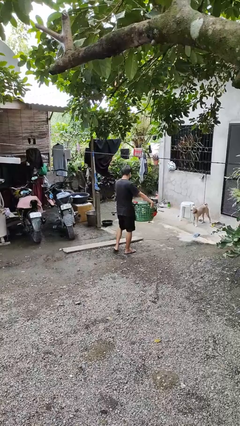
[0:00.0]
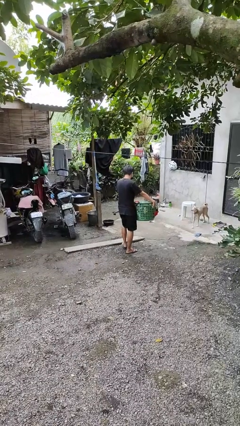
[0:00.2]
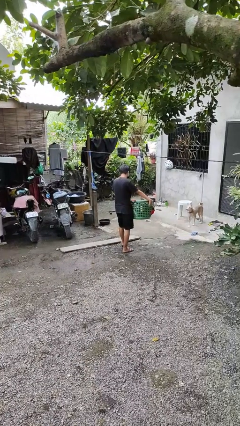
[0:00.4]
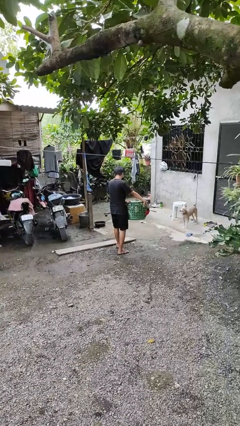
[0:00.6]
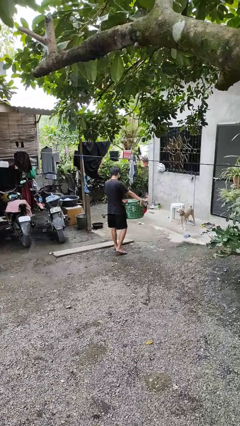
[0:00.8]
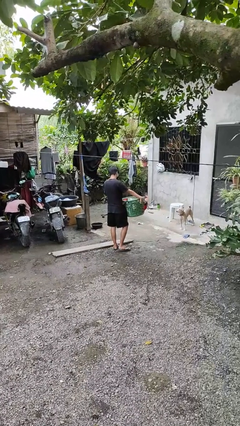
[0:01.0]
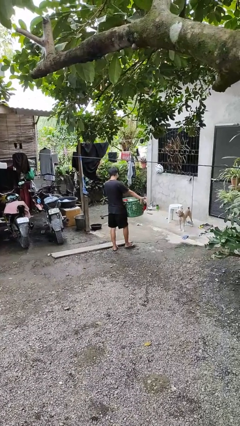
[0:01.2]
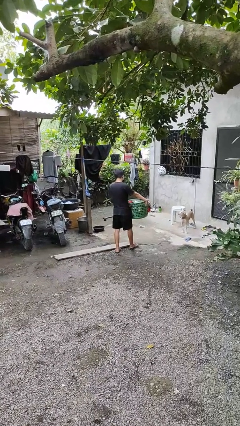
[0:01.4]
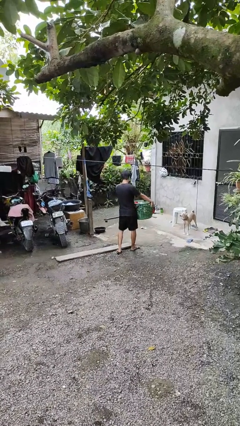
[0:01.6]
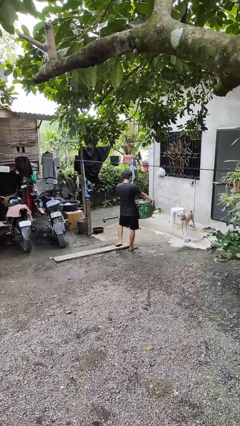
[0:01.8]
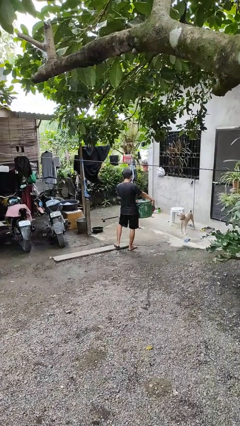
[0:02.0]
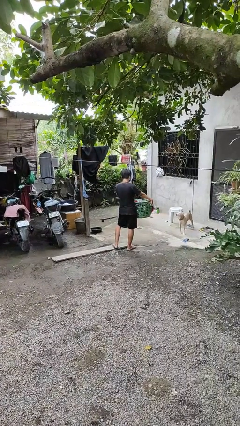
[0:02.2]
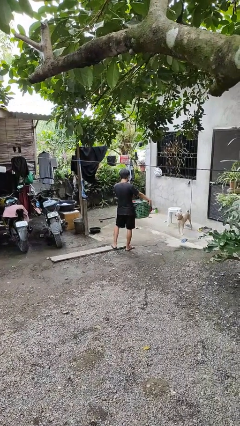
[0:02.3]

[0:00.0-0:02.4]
person carries laundry basket

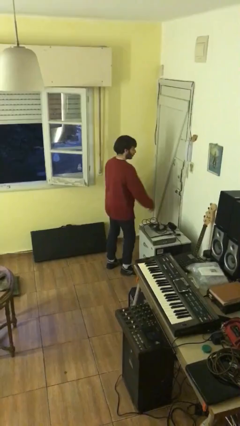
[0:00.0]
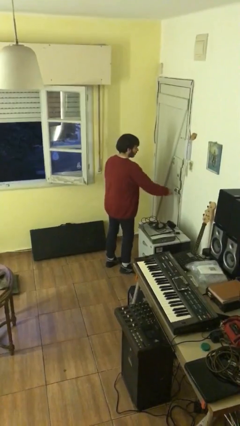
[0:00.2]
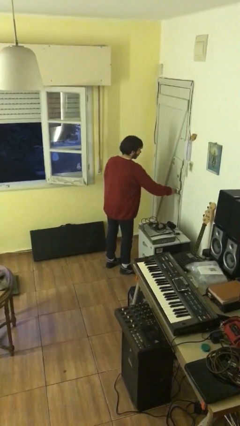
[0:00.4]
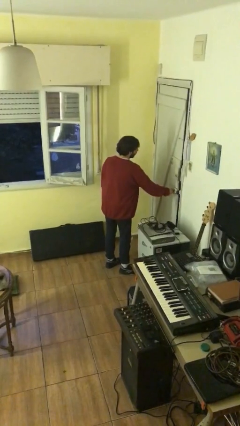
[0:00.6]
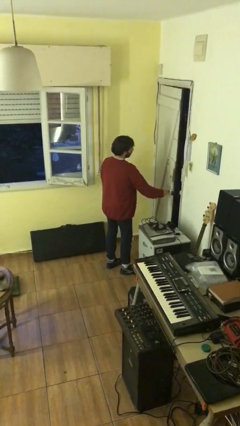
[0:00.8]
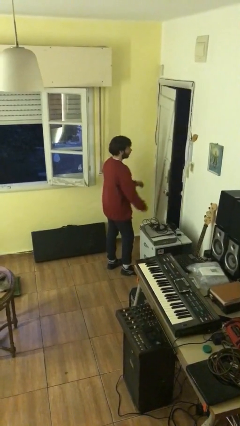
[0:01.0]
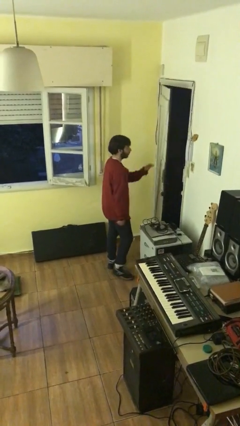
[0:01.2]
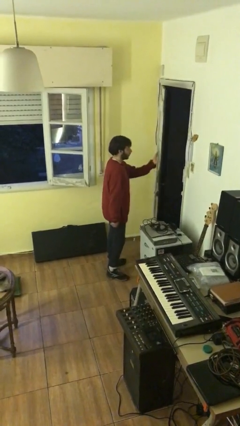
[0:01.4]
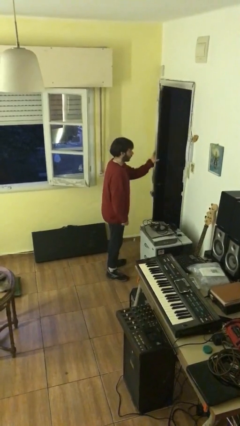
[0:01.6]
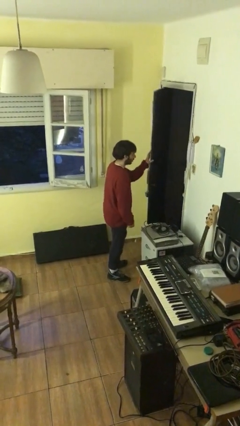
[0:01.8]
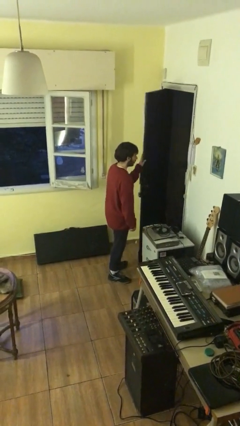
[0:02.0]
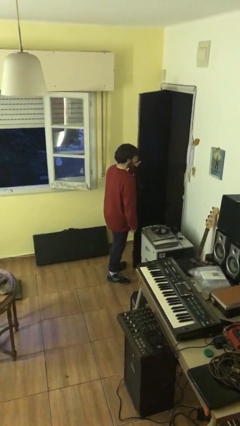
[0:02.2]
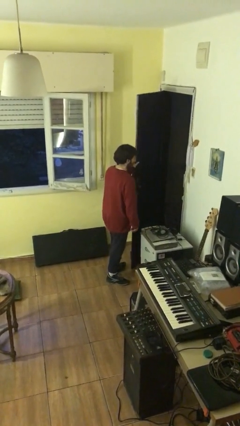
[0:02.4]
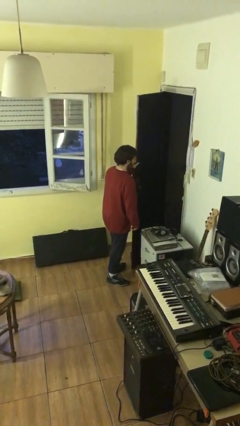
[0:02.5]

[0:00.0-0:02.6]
person opens facility door

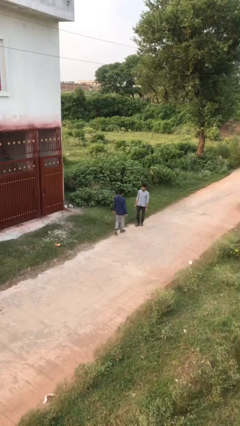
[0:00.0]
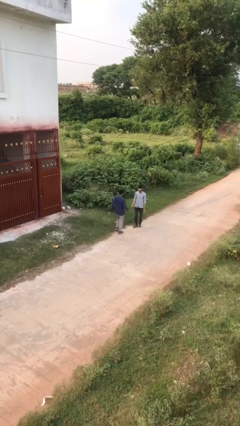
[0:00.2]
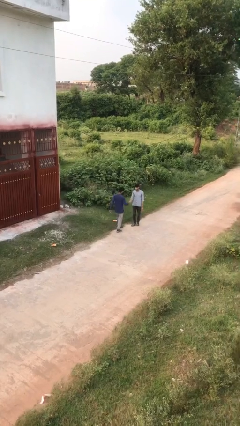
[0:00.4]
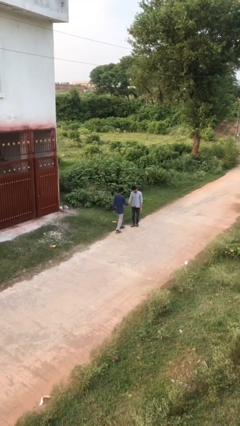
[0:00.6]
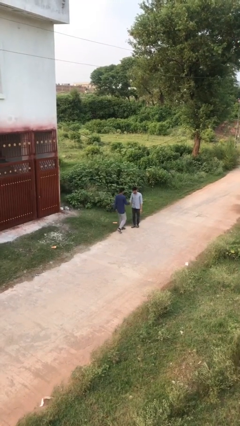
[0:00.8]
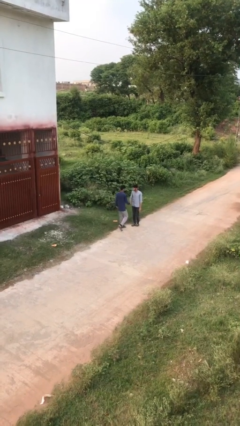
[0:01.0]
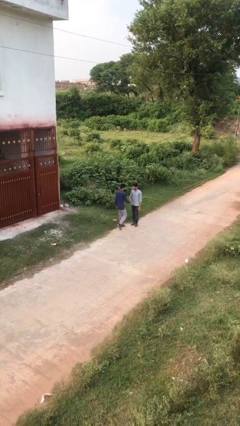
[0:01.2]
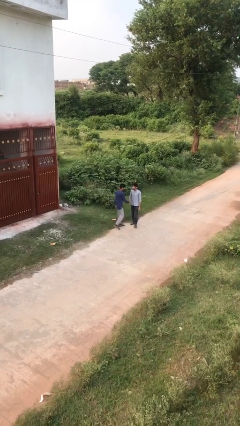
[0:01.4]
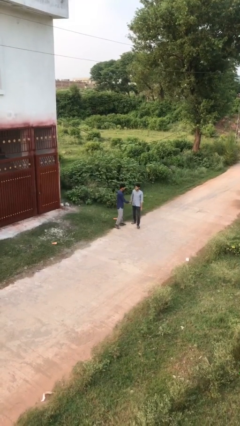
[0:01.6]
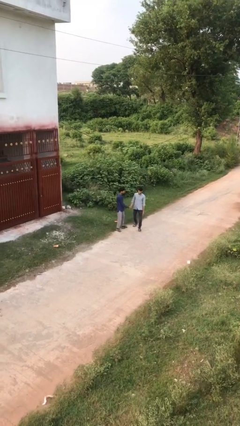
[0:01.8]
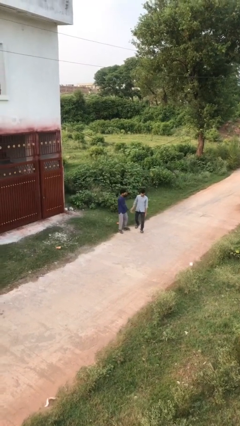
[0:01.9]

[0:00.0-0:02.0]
person shakes hand

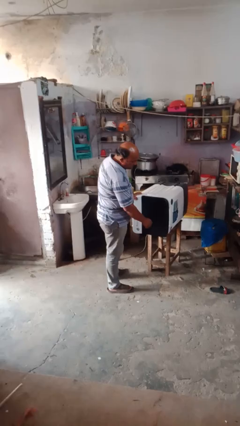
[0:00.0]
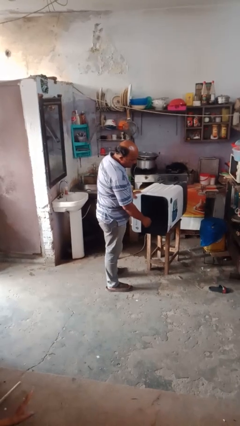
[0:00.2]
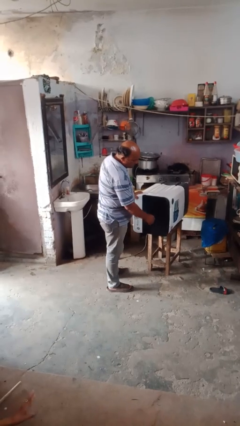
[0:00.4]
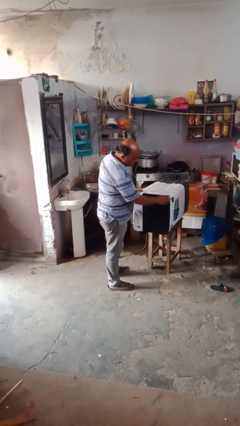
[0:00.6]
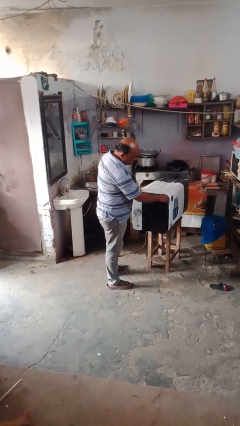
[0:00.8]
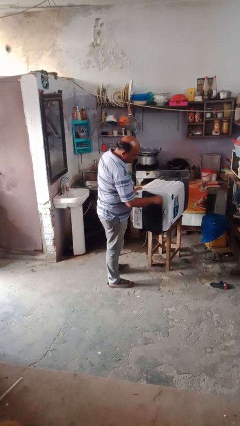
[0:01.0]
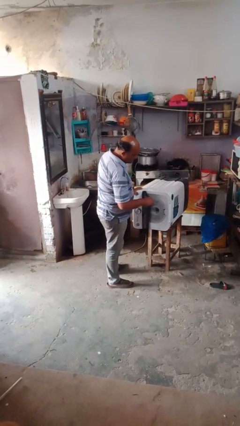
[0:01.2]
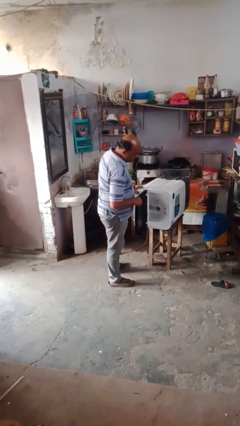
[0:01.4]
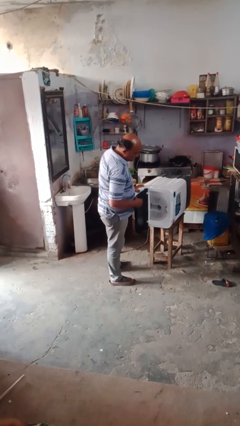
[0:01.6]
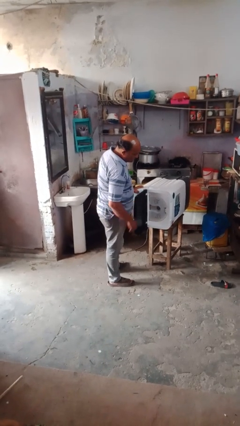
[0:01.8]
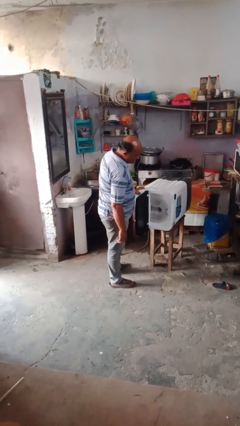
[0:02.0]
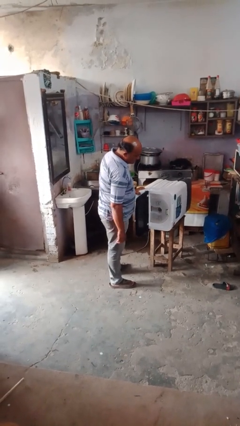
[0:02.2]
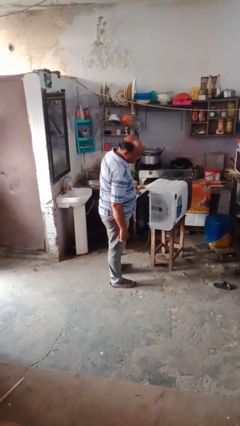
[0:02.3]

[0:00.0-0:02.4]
person opens dishwasher

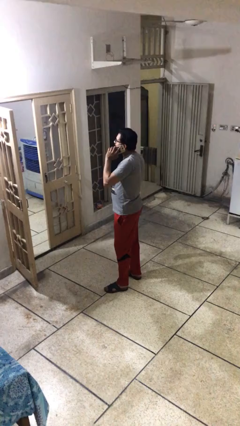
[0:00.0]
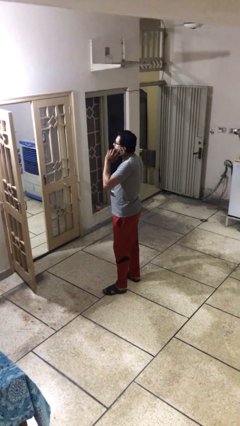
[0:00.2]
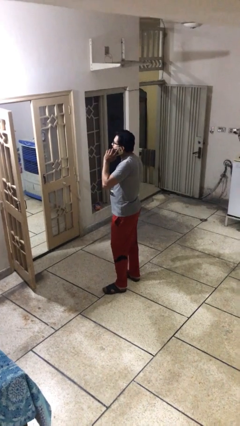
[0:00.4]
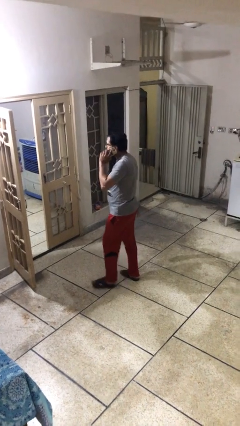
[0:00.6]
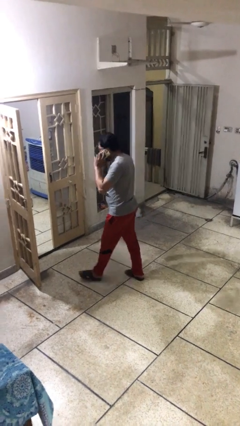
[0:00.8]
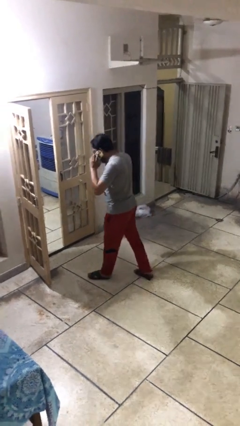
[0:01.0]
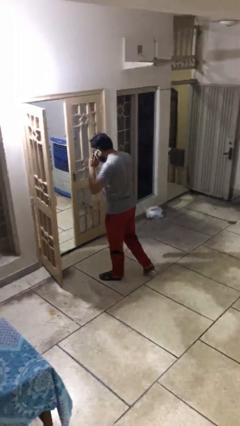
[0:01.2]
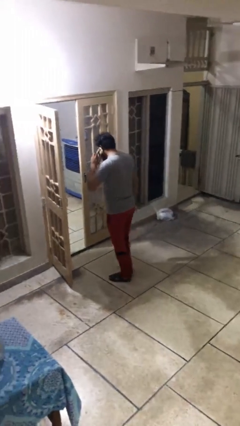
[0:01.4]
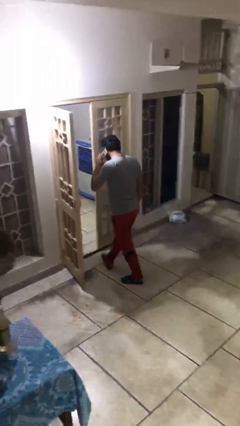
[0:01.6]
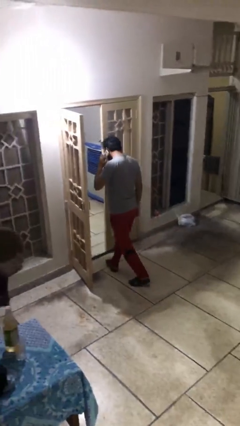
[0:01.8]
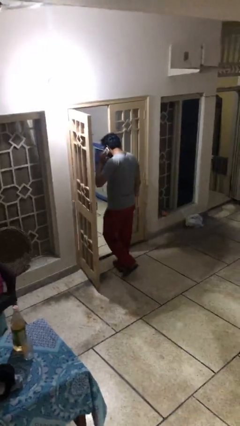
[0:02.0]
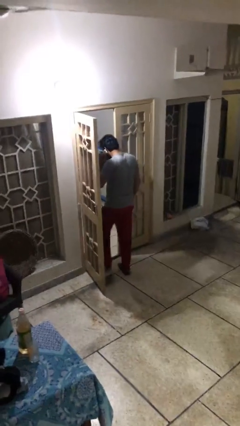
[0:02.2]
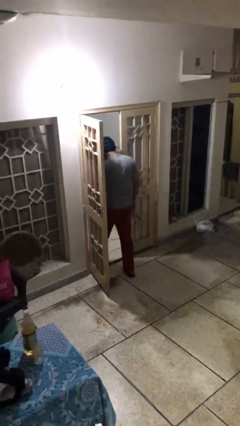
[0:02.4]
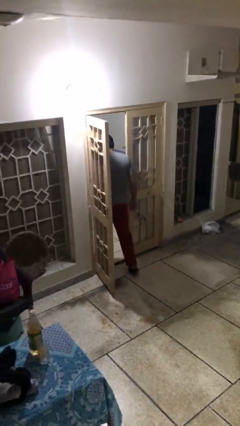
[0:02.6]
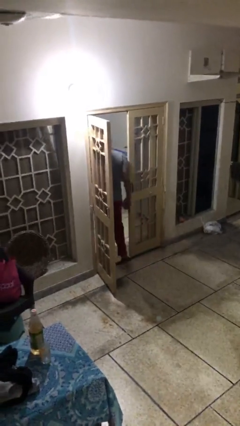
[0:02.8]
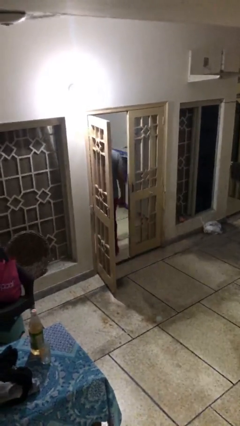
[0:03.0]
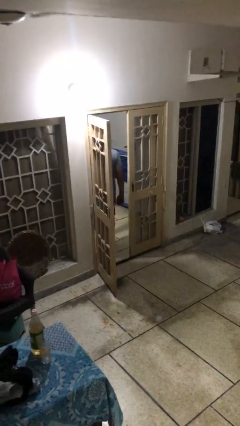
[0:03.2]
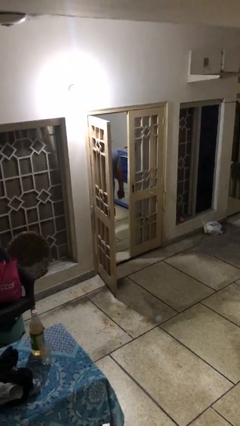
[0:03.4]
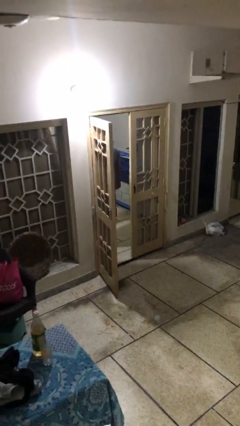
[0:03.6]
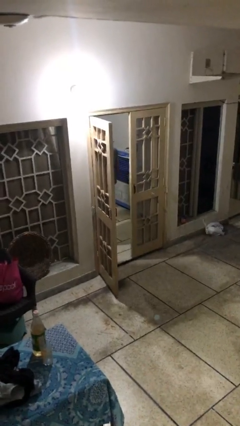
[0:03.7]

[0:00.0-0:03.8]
person exits scene through structure

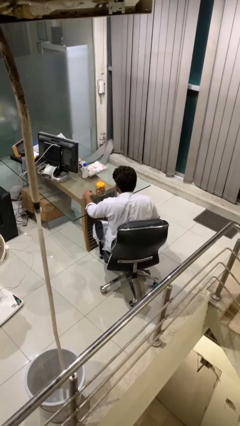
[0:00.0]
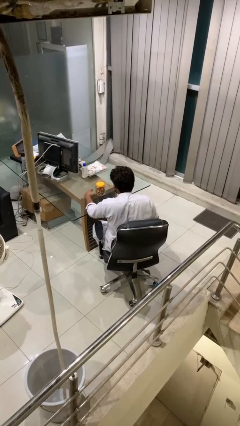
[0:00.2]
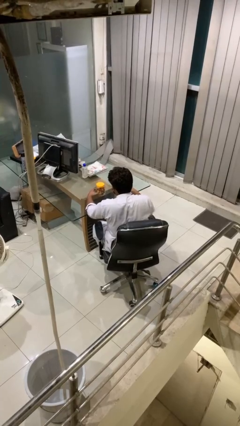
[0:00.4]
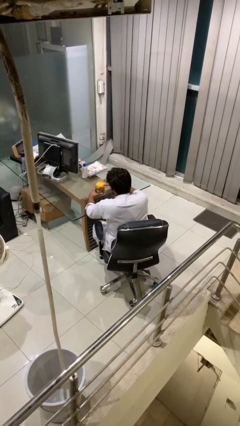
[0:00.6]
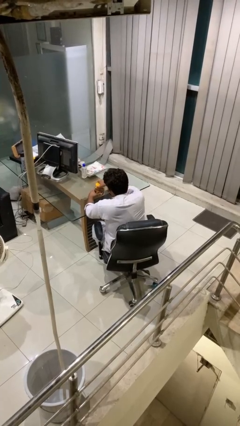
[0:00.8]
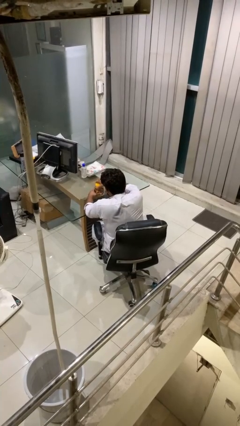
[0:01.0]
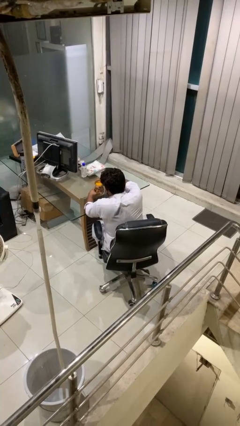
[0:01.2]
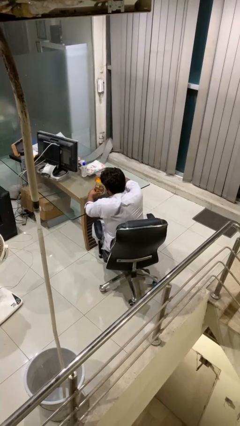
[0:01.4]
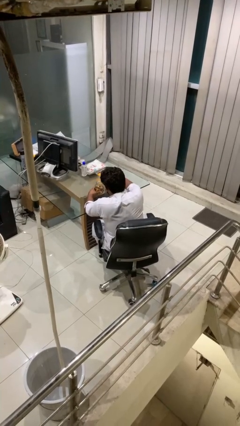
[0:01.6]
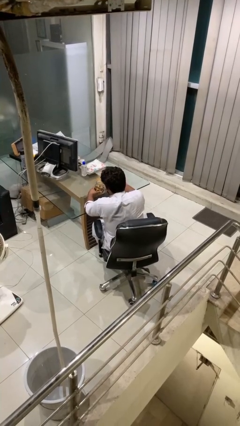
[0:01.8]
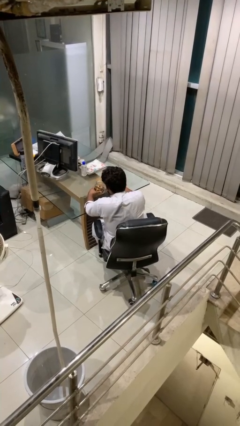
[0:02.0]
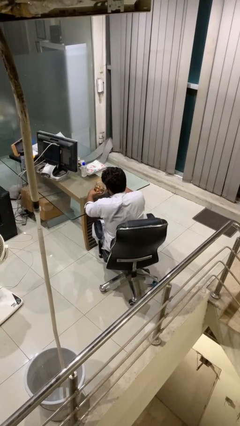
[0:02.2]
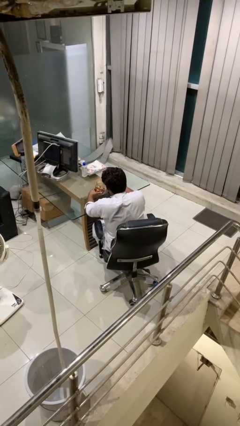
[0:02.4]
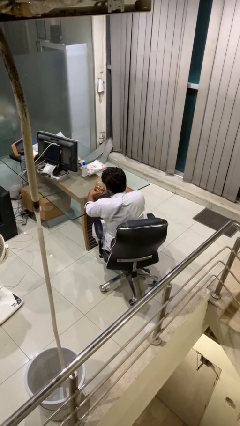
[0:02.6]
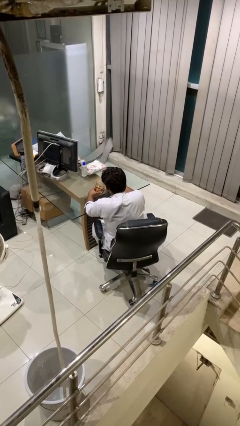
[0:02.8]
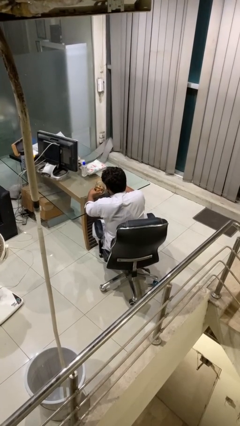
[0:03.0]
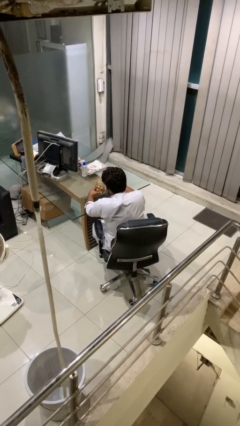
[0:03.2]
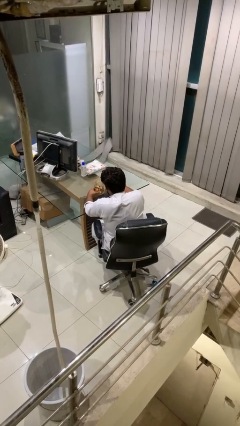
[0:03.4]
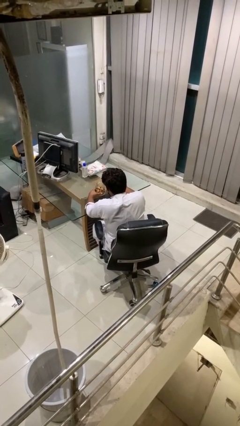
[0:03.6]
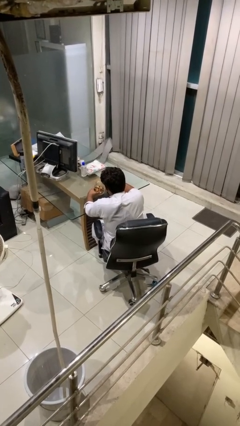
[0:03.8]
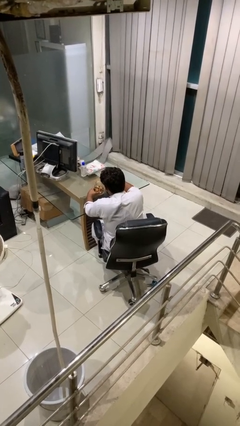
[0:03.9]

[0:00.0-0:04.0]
person opens jar
